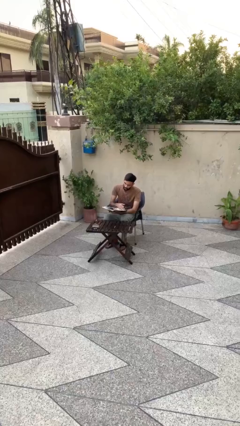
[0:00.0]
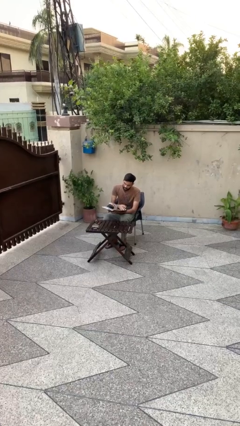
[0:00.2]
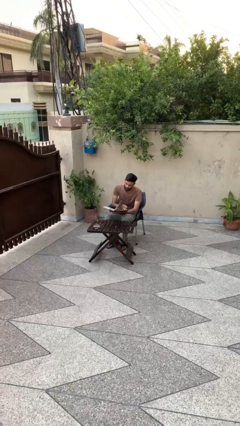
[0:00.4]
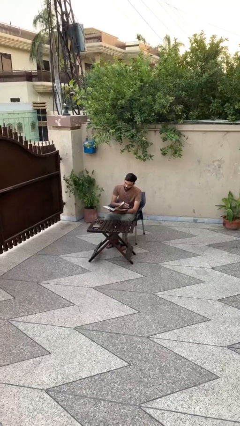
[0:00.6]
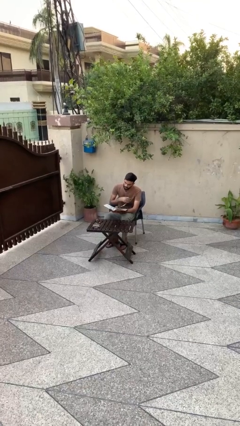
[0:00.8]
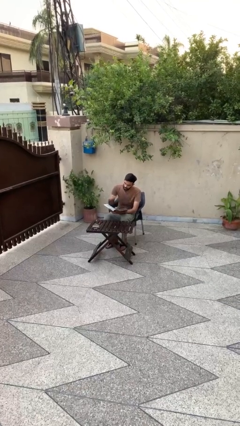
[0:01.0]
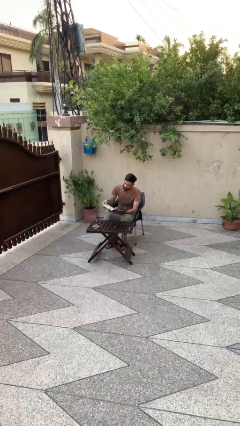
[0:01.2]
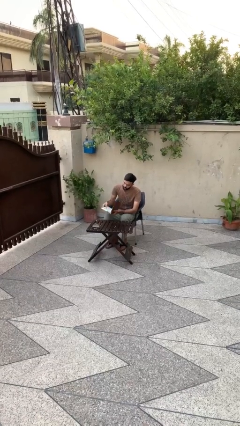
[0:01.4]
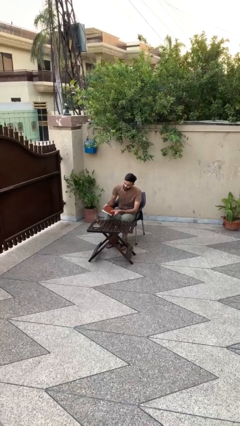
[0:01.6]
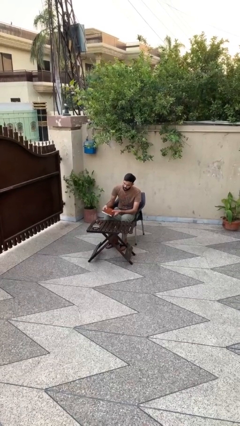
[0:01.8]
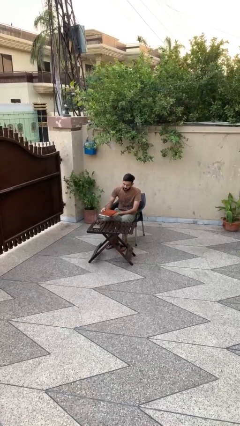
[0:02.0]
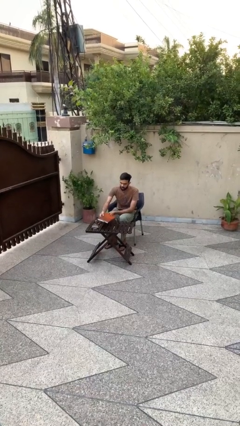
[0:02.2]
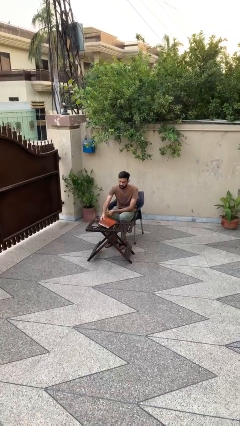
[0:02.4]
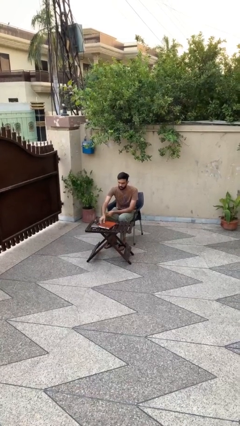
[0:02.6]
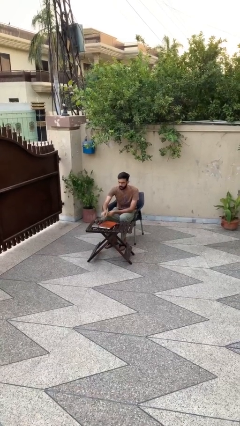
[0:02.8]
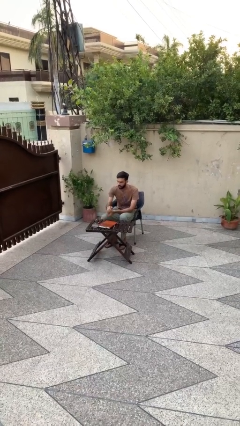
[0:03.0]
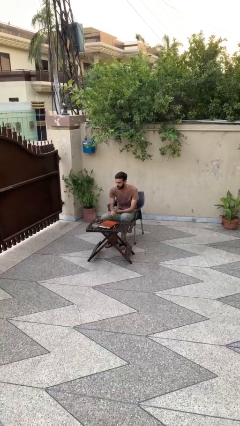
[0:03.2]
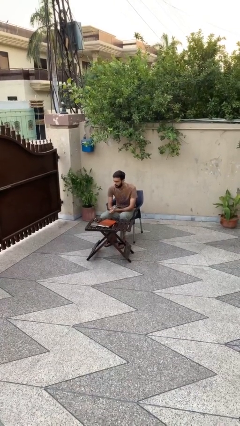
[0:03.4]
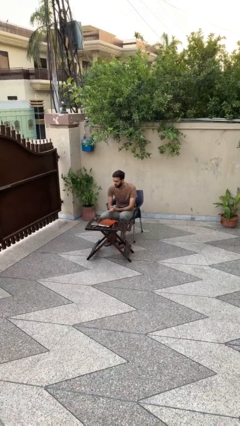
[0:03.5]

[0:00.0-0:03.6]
person puts down object on table

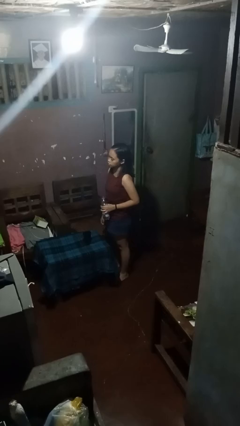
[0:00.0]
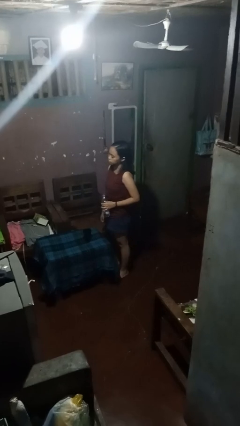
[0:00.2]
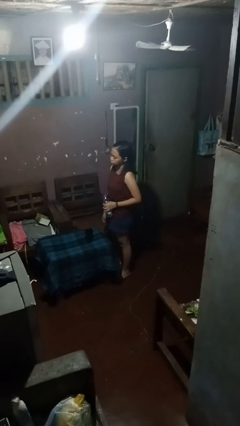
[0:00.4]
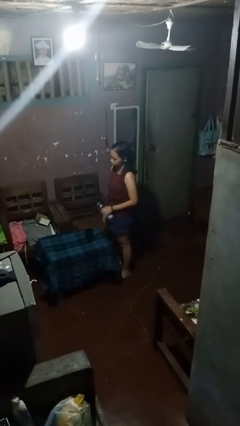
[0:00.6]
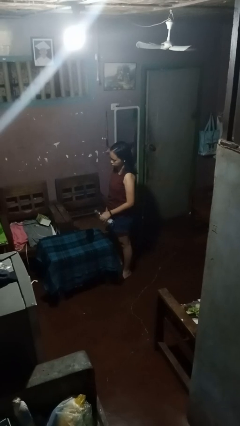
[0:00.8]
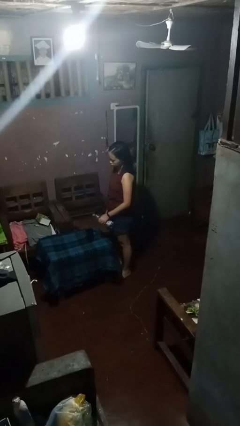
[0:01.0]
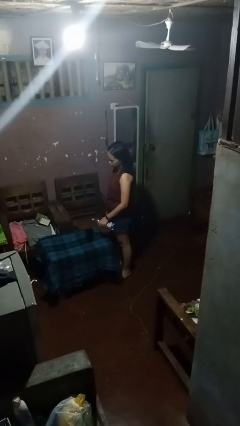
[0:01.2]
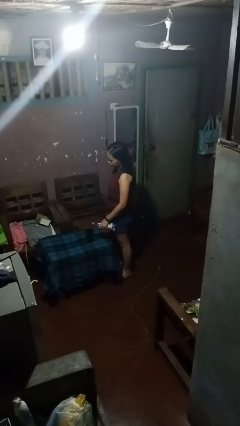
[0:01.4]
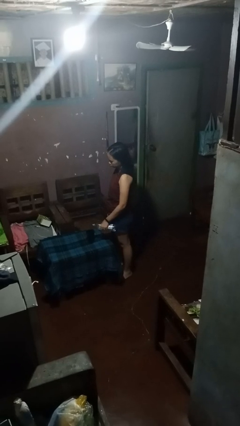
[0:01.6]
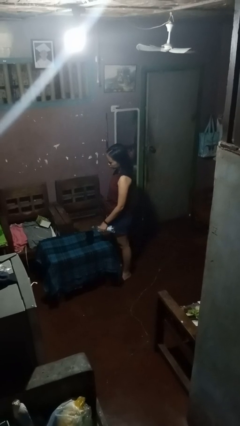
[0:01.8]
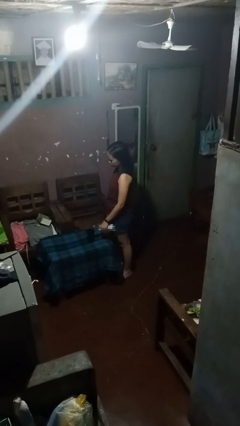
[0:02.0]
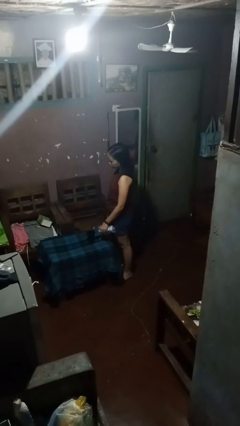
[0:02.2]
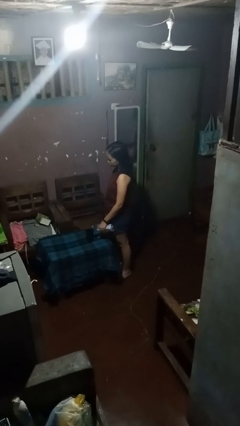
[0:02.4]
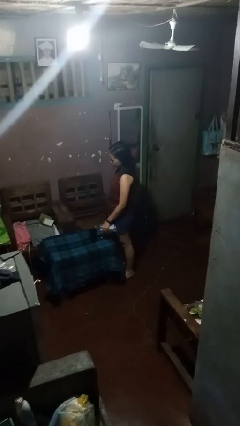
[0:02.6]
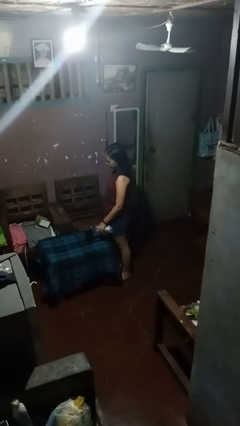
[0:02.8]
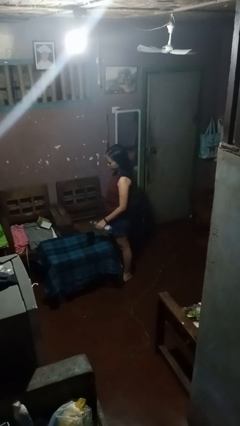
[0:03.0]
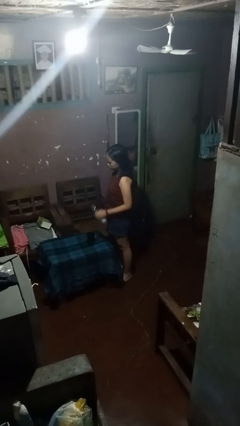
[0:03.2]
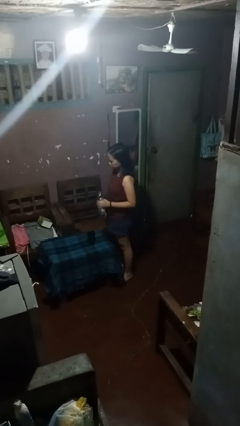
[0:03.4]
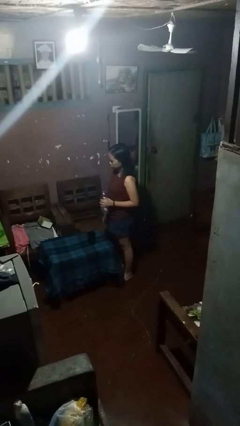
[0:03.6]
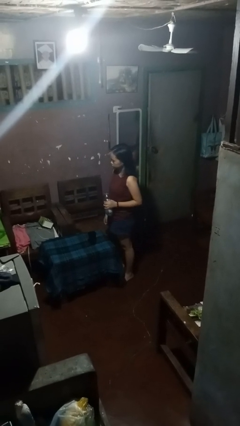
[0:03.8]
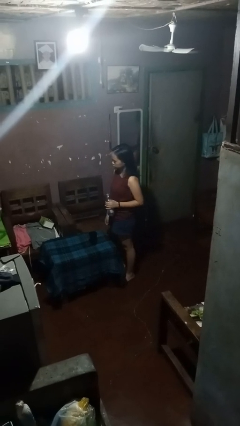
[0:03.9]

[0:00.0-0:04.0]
person pours liquid into cup

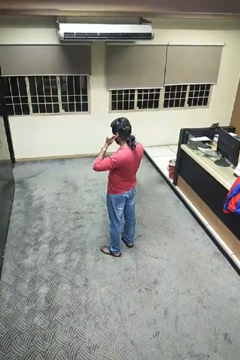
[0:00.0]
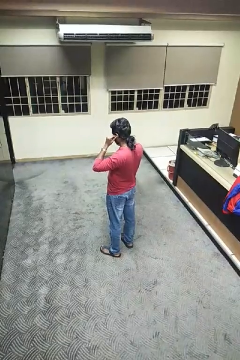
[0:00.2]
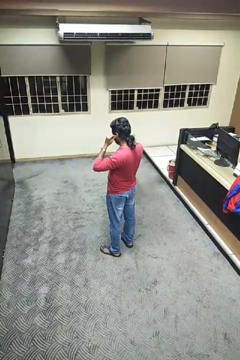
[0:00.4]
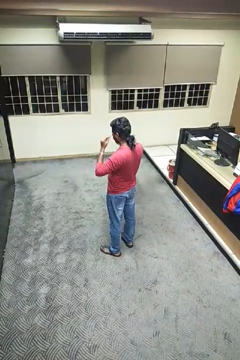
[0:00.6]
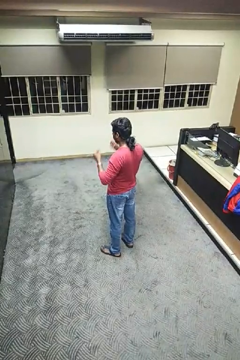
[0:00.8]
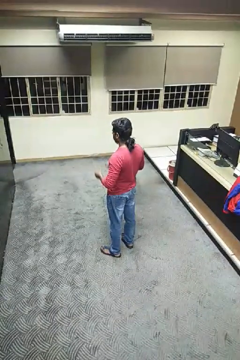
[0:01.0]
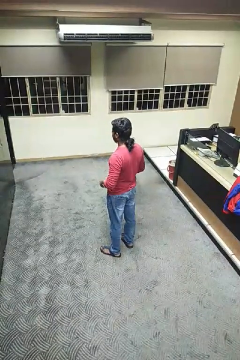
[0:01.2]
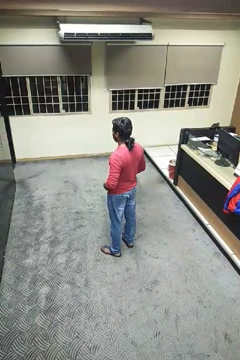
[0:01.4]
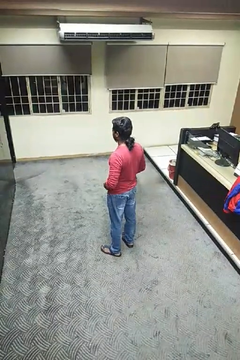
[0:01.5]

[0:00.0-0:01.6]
person takes off headphones

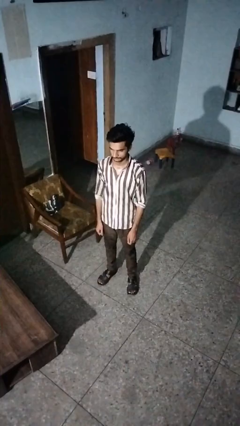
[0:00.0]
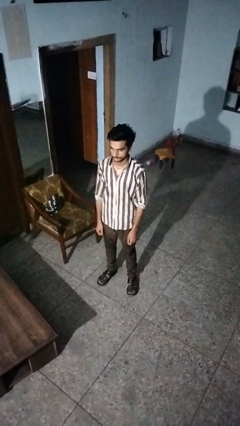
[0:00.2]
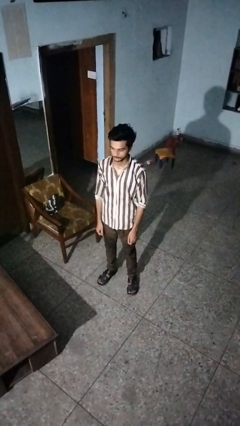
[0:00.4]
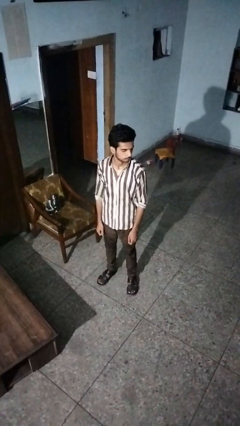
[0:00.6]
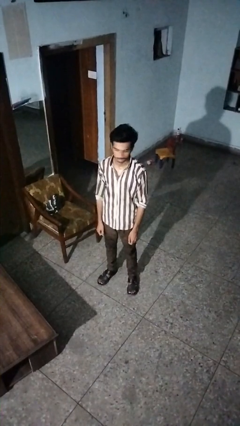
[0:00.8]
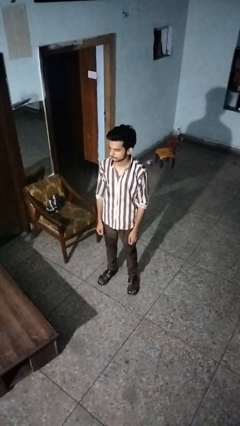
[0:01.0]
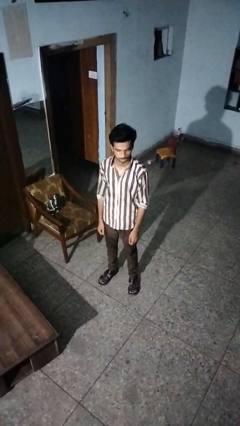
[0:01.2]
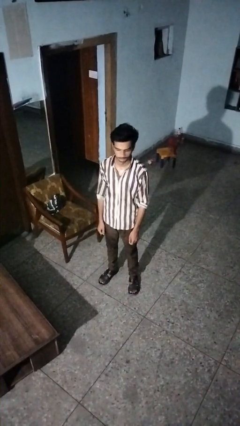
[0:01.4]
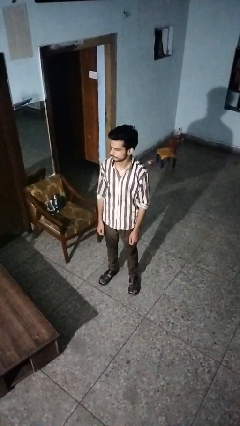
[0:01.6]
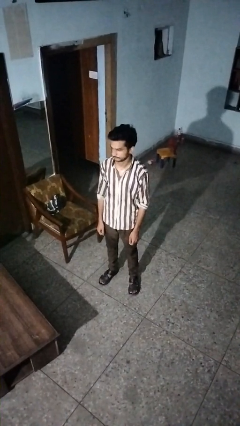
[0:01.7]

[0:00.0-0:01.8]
person shakes head

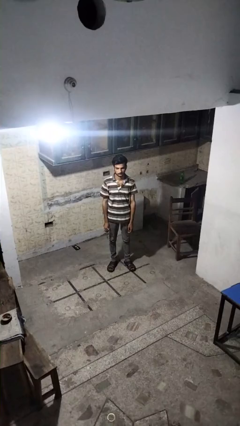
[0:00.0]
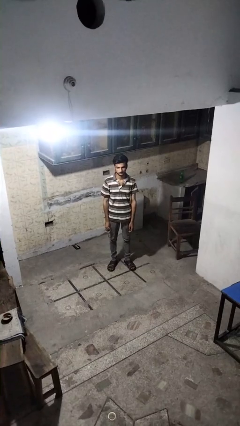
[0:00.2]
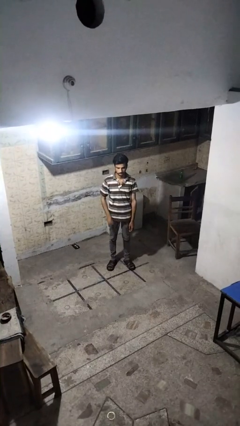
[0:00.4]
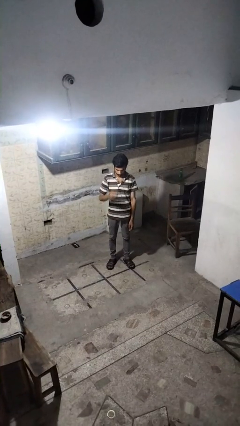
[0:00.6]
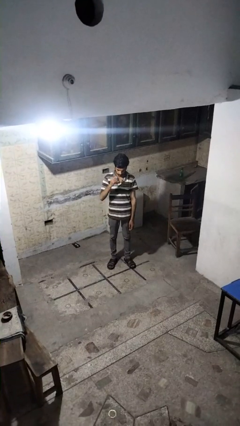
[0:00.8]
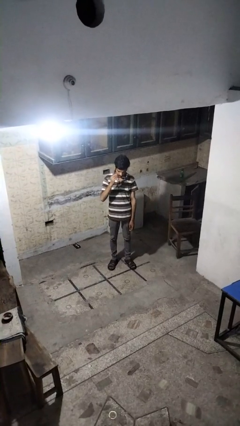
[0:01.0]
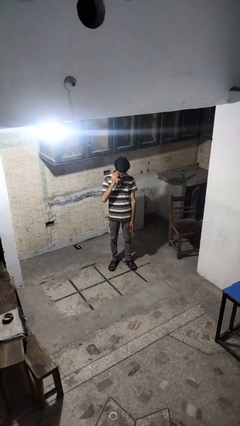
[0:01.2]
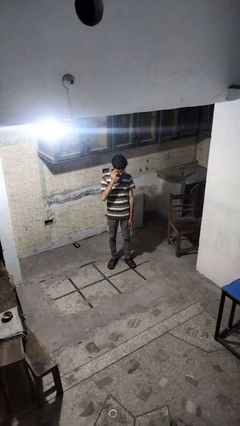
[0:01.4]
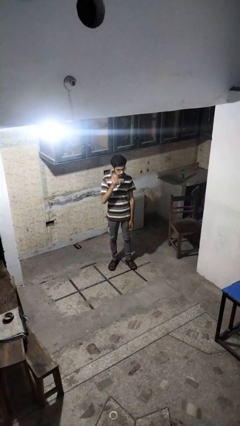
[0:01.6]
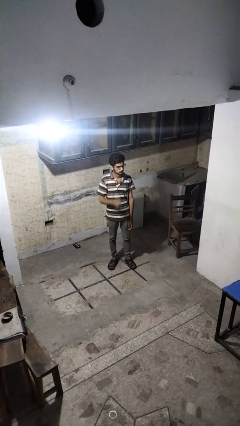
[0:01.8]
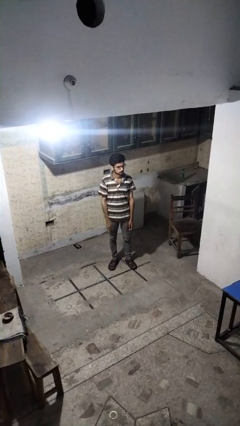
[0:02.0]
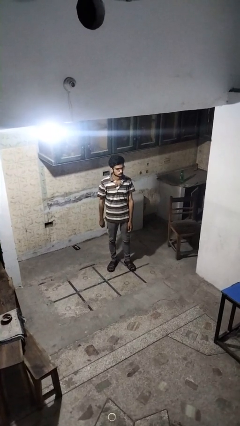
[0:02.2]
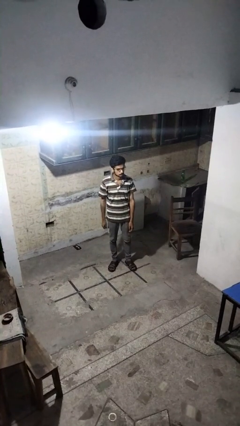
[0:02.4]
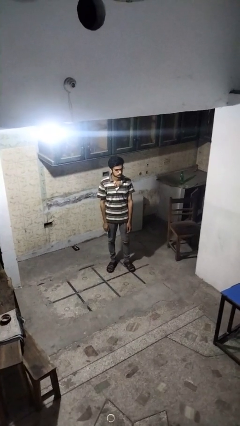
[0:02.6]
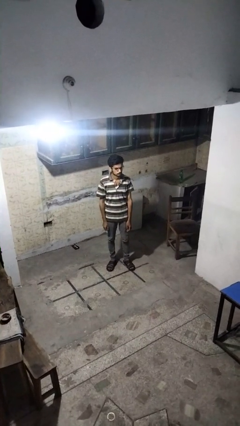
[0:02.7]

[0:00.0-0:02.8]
person puts on glasses

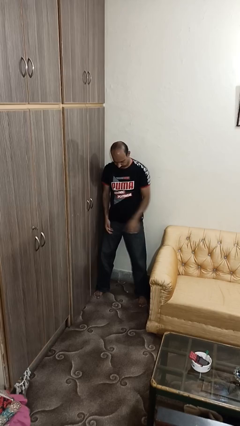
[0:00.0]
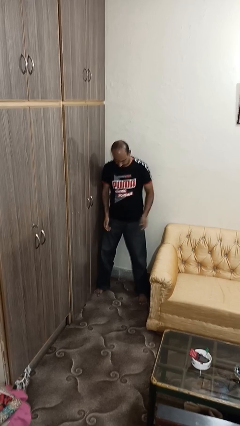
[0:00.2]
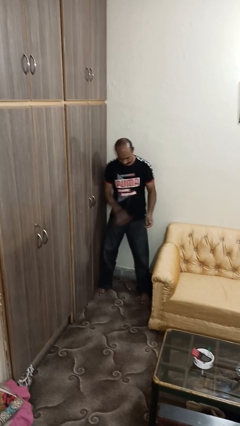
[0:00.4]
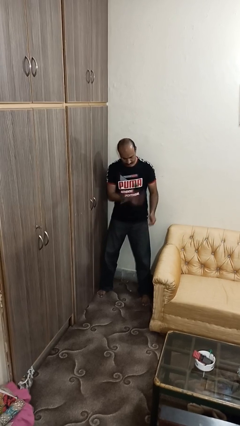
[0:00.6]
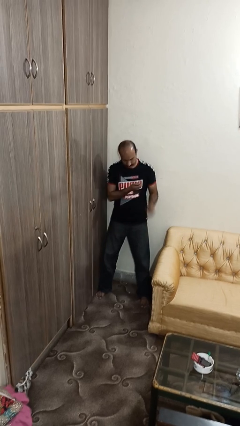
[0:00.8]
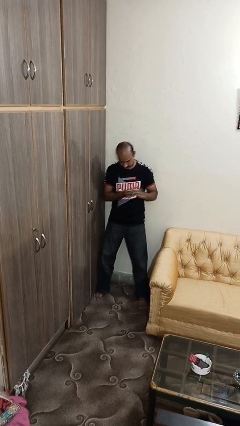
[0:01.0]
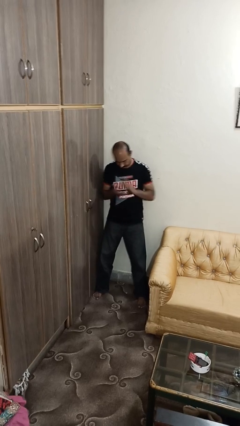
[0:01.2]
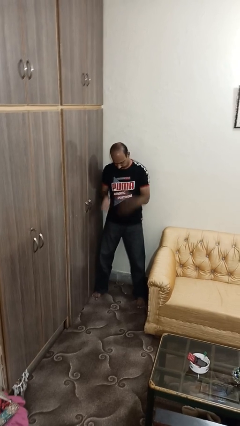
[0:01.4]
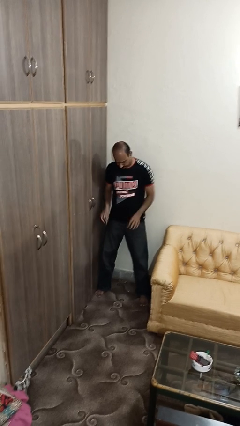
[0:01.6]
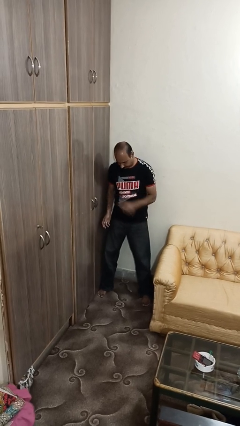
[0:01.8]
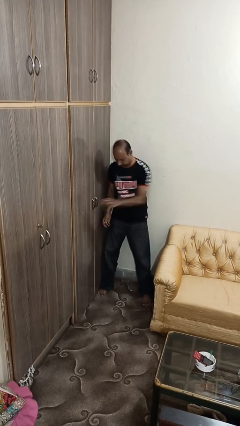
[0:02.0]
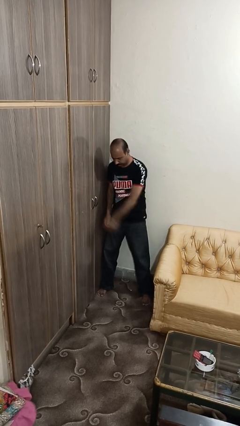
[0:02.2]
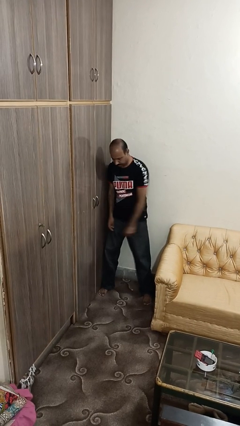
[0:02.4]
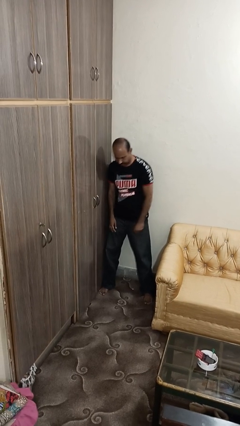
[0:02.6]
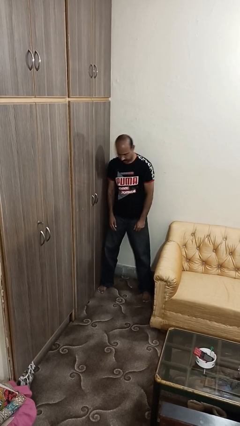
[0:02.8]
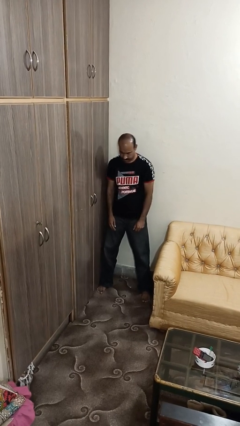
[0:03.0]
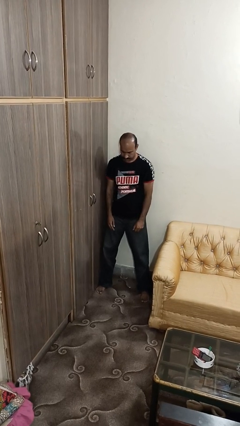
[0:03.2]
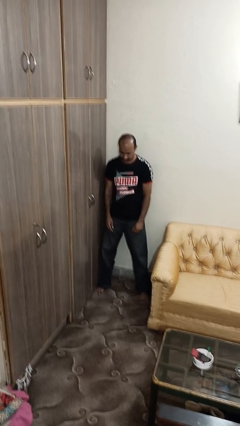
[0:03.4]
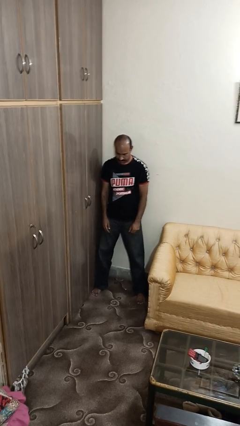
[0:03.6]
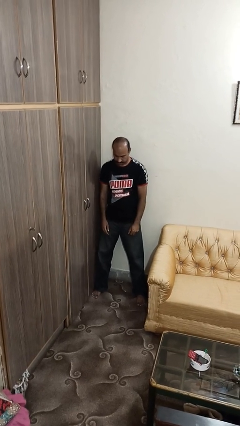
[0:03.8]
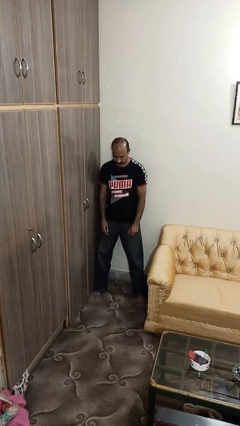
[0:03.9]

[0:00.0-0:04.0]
person bounces ball on floor
